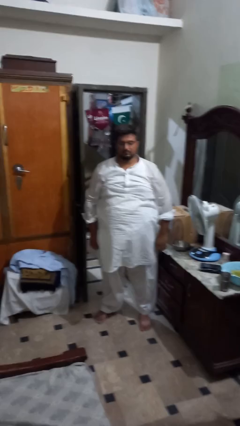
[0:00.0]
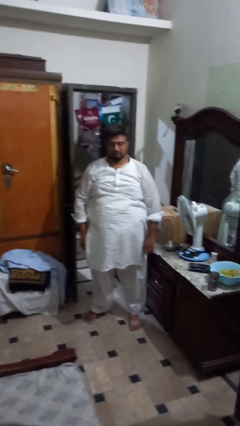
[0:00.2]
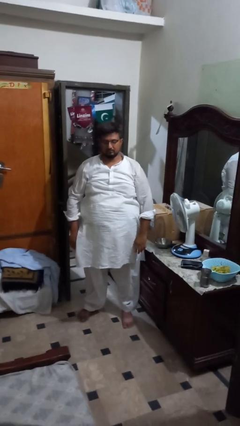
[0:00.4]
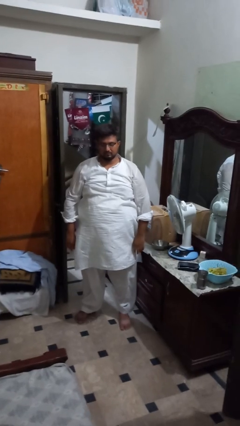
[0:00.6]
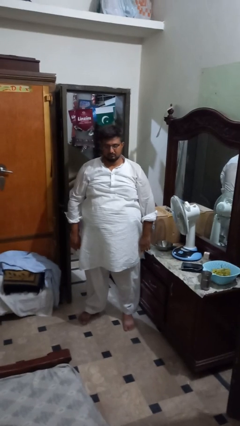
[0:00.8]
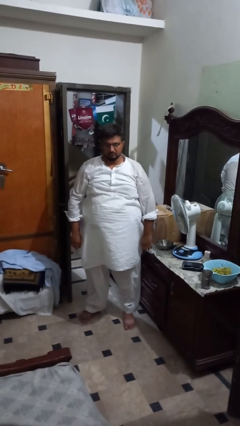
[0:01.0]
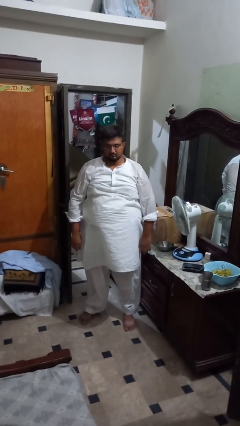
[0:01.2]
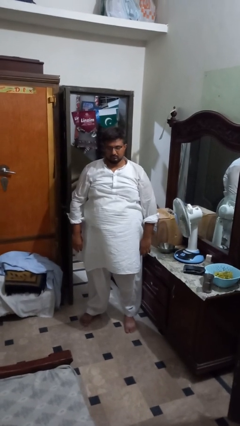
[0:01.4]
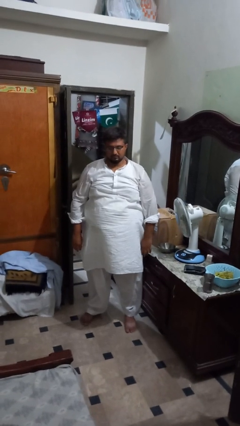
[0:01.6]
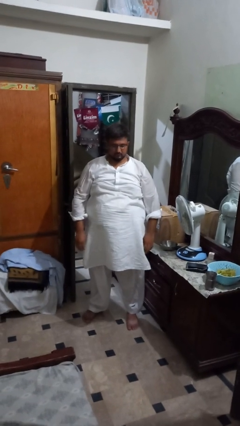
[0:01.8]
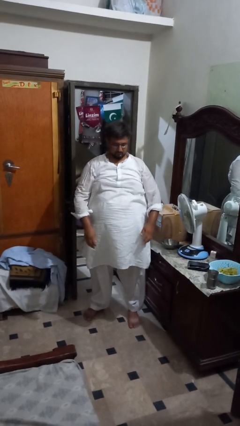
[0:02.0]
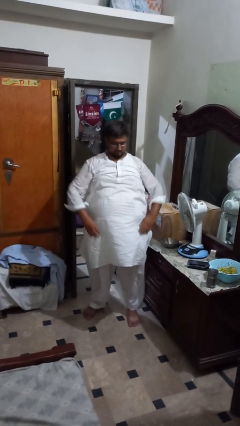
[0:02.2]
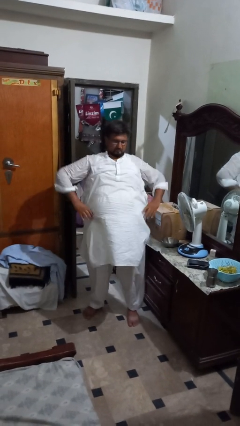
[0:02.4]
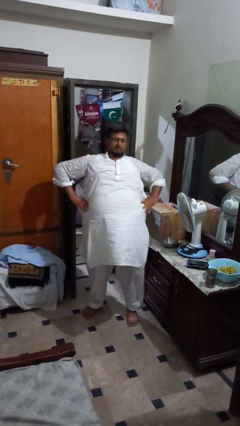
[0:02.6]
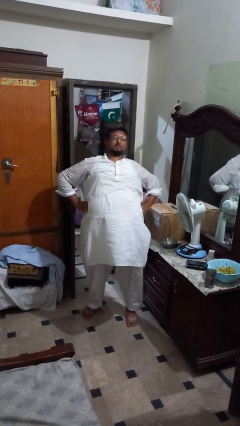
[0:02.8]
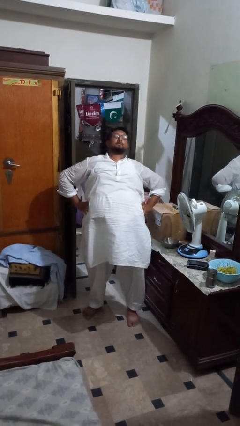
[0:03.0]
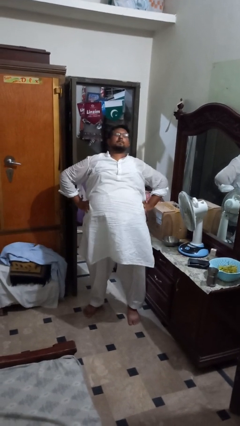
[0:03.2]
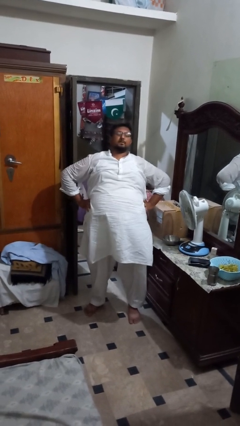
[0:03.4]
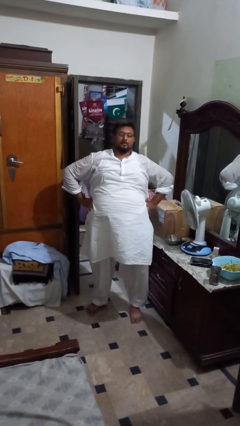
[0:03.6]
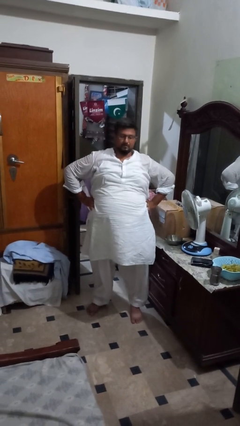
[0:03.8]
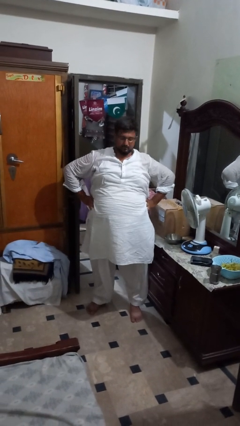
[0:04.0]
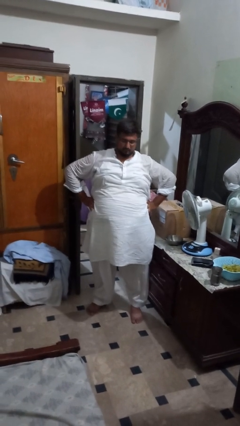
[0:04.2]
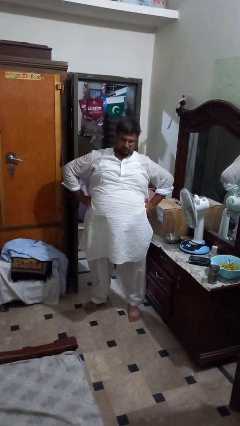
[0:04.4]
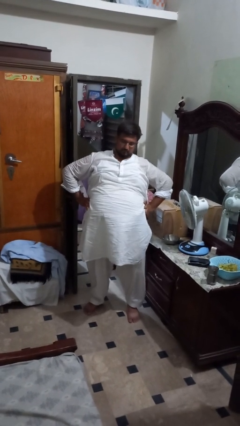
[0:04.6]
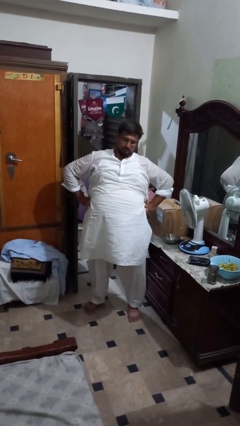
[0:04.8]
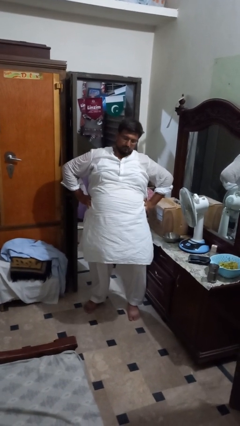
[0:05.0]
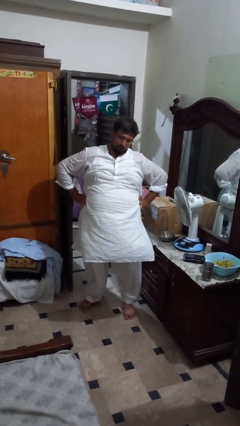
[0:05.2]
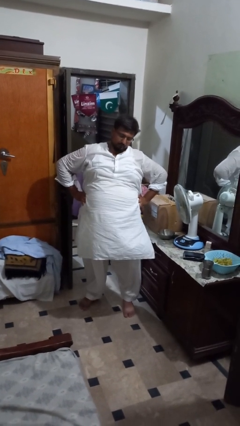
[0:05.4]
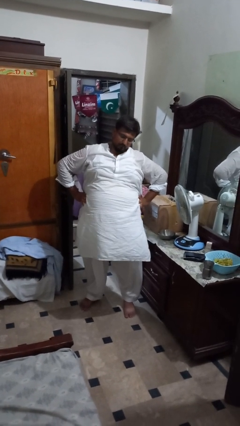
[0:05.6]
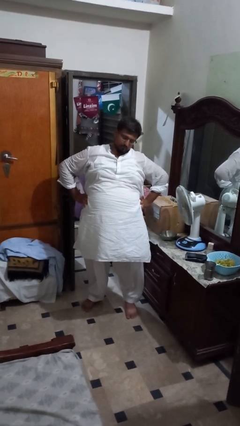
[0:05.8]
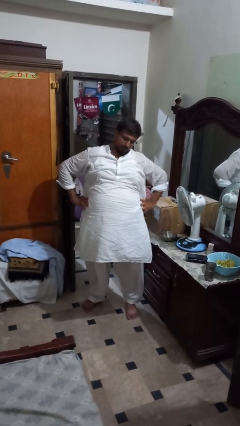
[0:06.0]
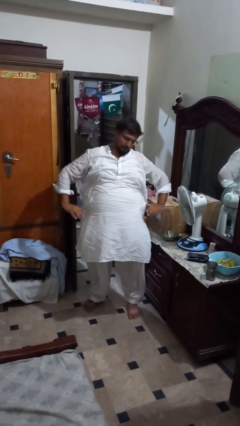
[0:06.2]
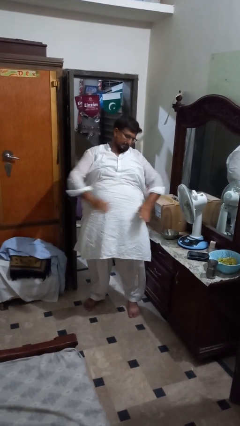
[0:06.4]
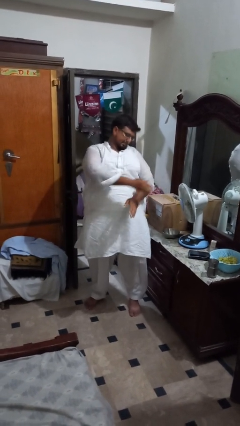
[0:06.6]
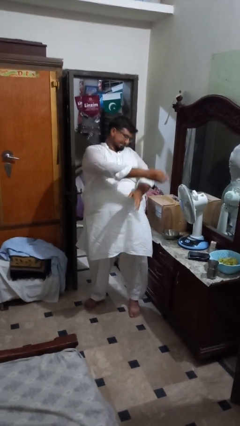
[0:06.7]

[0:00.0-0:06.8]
person stretches back

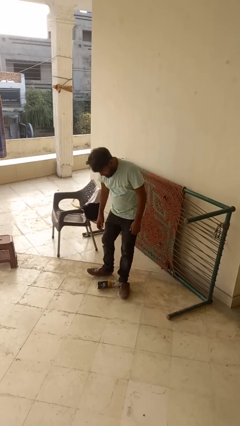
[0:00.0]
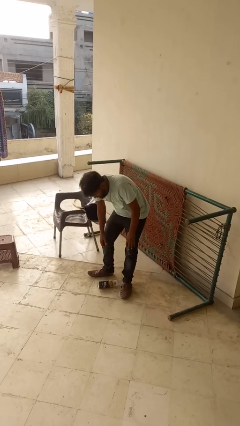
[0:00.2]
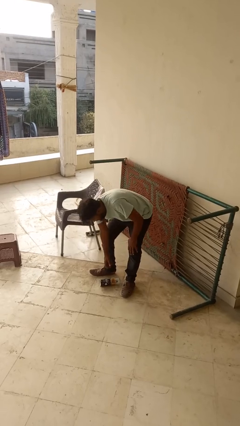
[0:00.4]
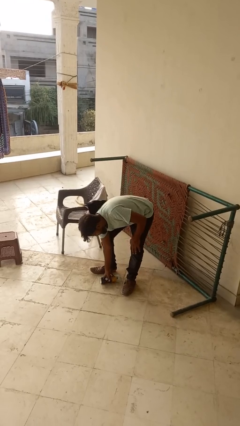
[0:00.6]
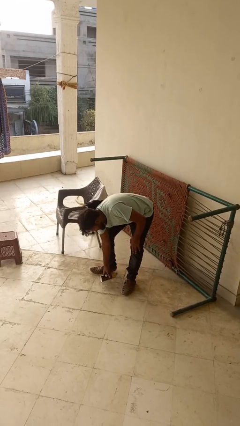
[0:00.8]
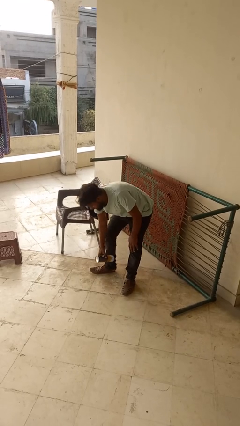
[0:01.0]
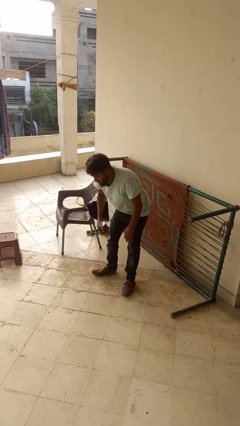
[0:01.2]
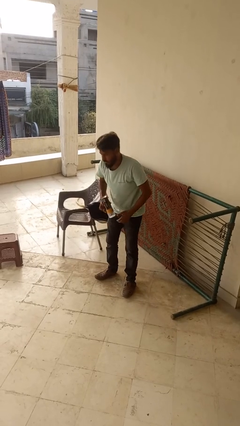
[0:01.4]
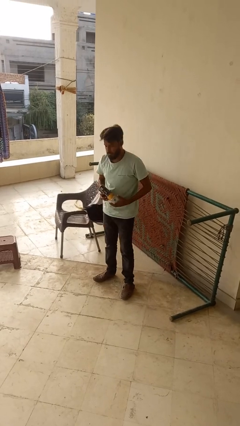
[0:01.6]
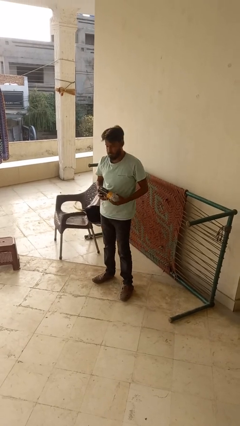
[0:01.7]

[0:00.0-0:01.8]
person picks up object from floor

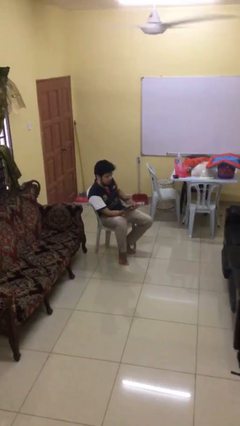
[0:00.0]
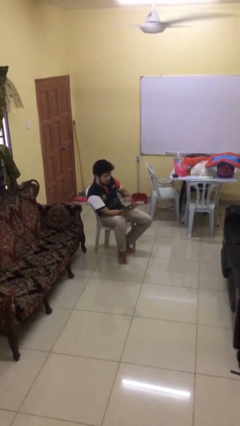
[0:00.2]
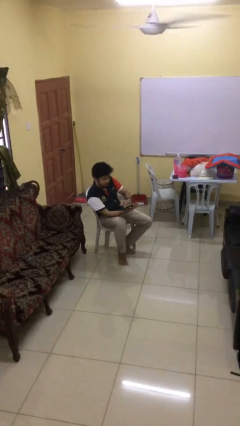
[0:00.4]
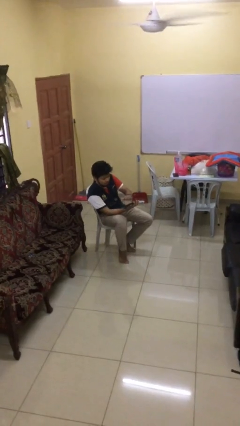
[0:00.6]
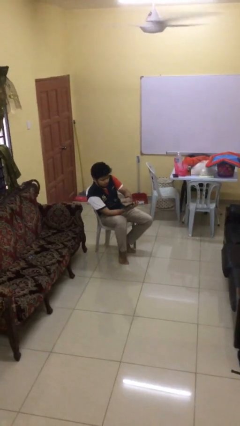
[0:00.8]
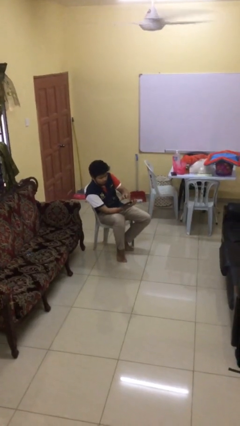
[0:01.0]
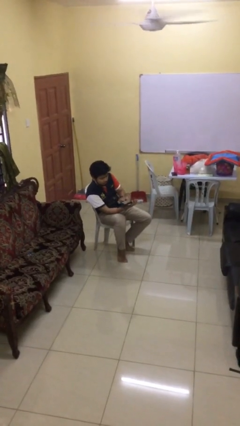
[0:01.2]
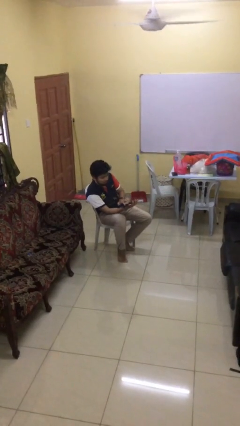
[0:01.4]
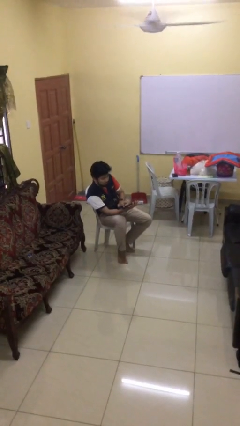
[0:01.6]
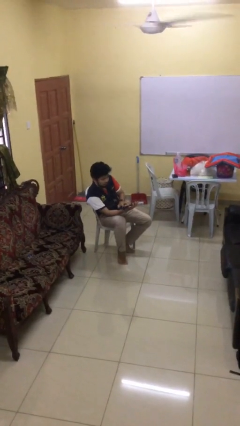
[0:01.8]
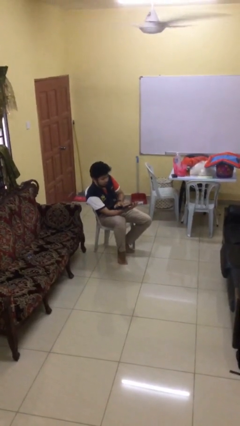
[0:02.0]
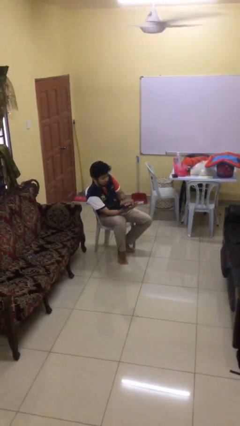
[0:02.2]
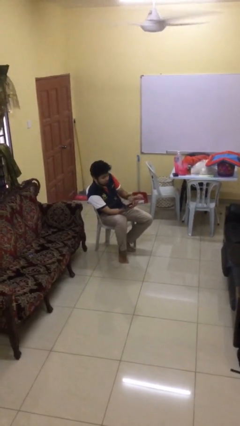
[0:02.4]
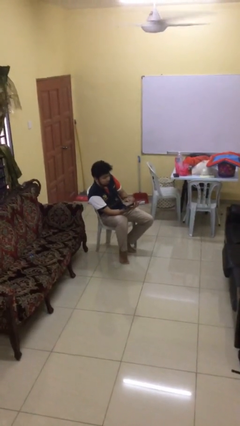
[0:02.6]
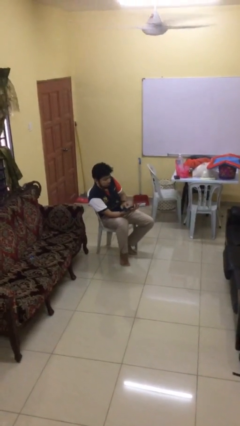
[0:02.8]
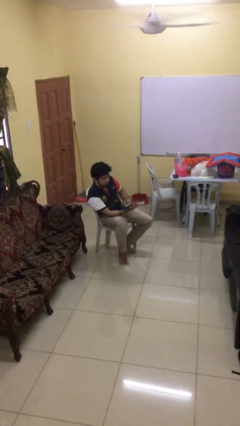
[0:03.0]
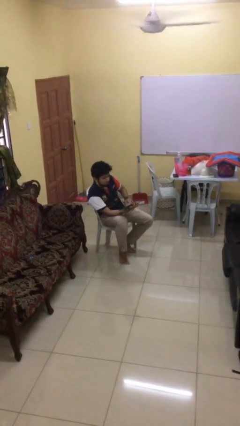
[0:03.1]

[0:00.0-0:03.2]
person interacts with tablet

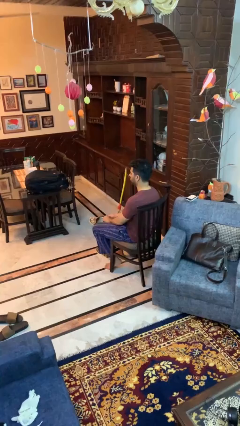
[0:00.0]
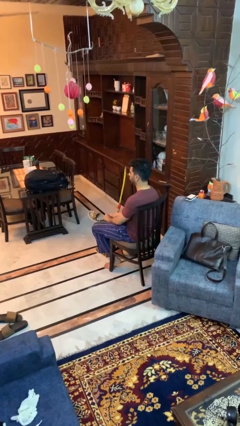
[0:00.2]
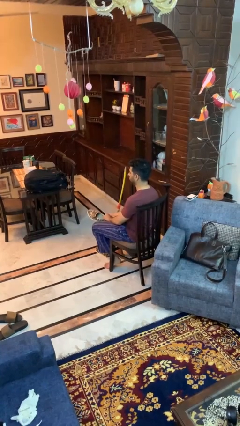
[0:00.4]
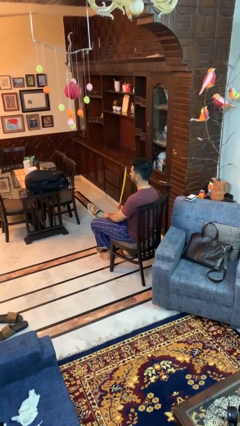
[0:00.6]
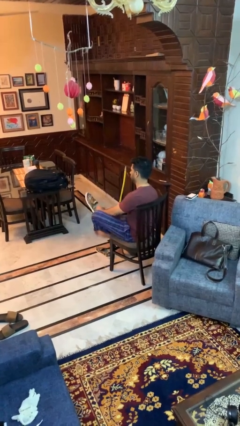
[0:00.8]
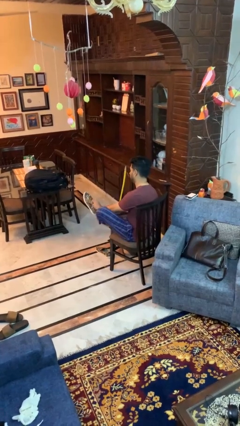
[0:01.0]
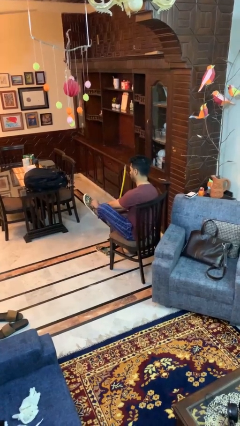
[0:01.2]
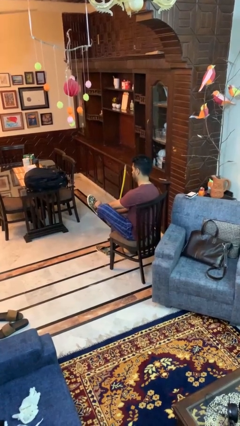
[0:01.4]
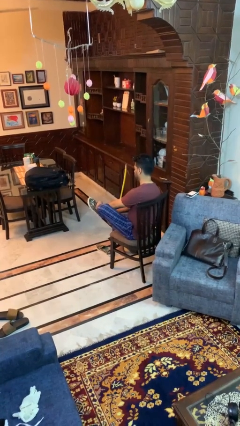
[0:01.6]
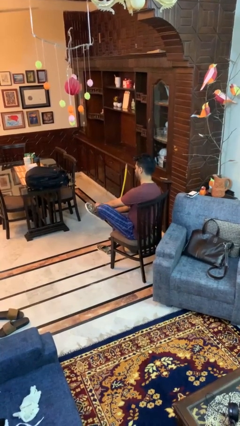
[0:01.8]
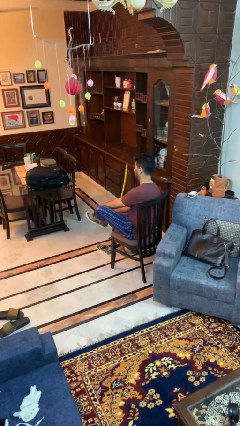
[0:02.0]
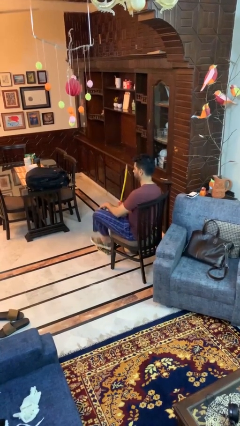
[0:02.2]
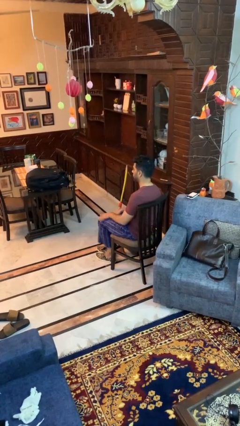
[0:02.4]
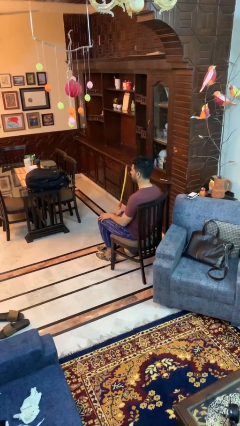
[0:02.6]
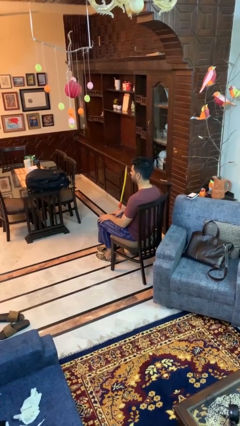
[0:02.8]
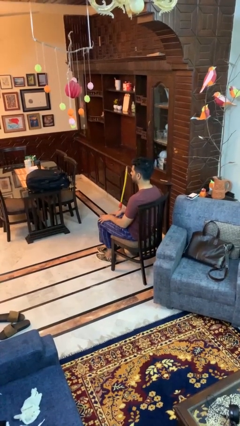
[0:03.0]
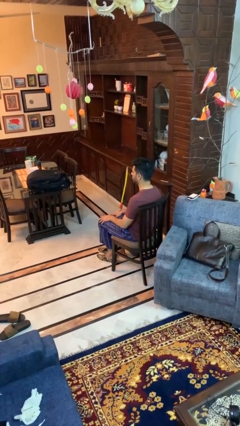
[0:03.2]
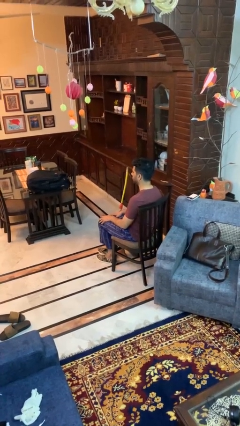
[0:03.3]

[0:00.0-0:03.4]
person puts on shoes

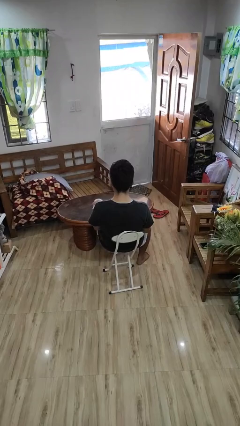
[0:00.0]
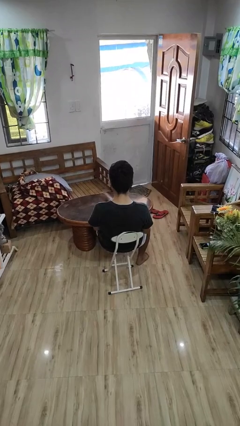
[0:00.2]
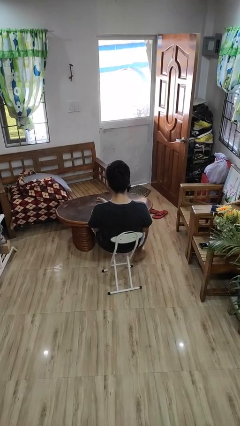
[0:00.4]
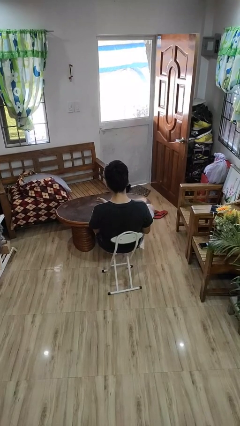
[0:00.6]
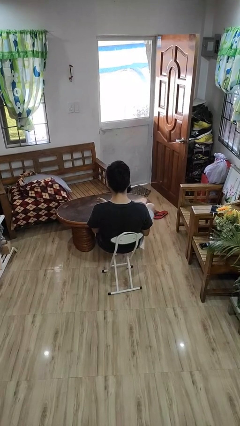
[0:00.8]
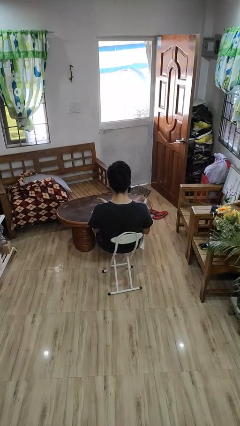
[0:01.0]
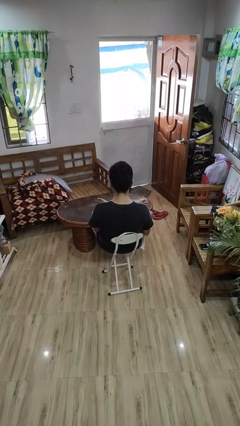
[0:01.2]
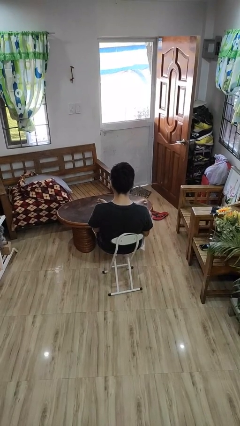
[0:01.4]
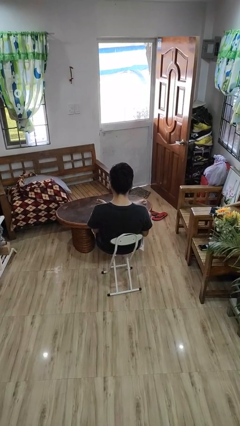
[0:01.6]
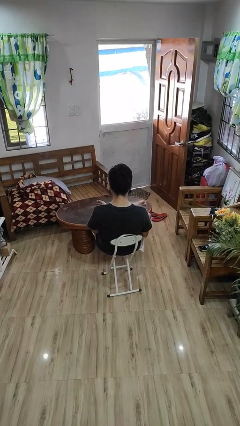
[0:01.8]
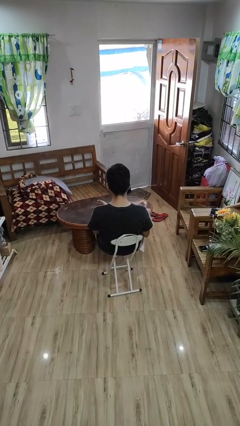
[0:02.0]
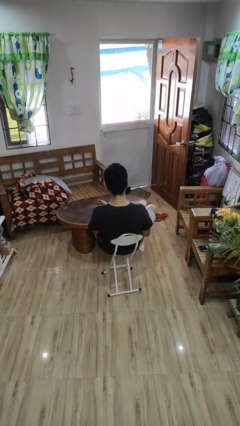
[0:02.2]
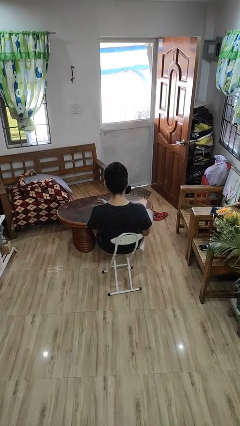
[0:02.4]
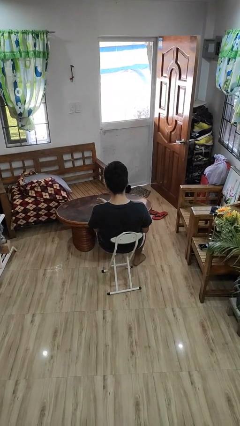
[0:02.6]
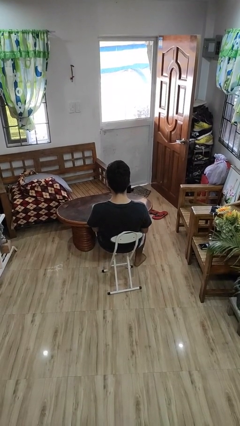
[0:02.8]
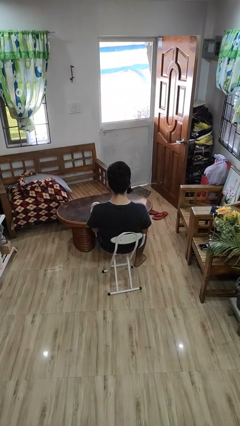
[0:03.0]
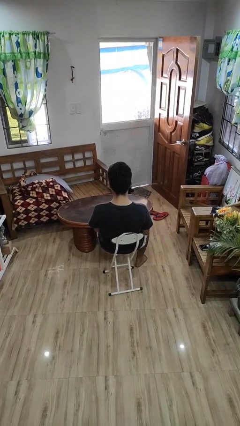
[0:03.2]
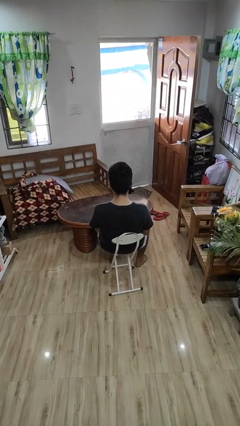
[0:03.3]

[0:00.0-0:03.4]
person puts feet up
